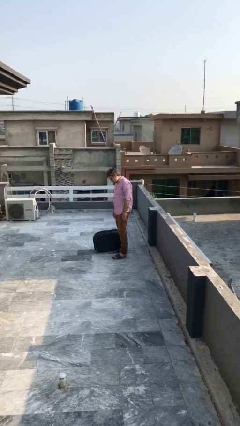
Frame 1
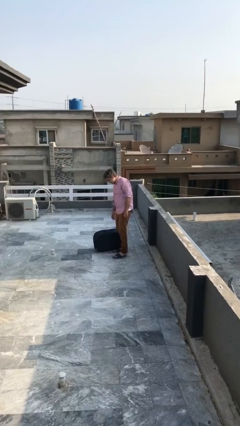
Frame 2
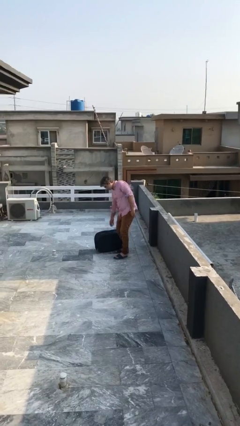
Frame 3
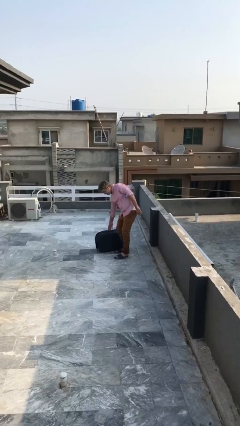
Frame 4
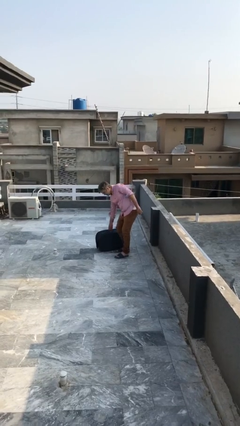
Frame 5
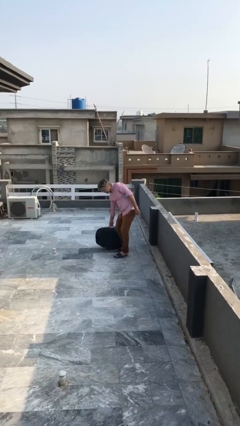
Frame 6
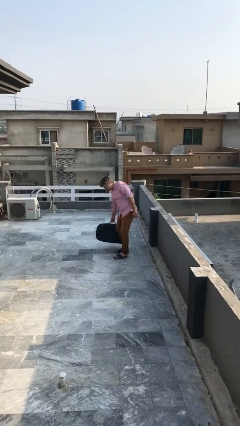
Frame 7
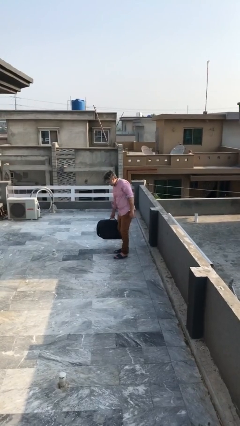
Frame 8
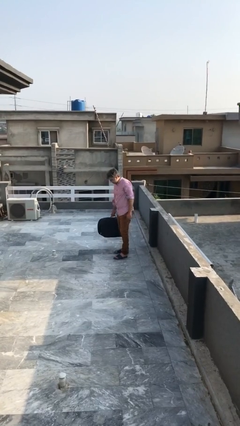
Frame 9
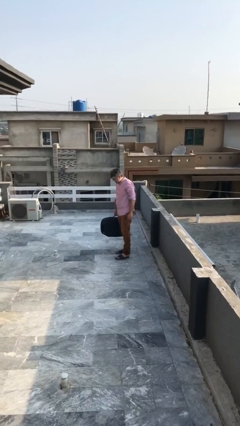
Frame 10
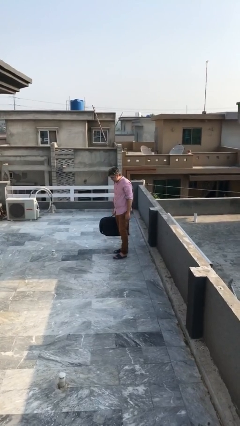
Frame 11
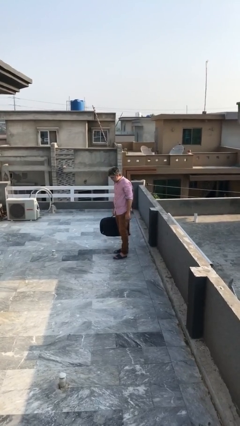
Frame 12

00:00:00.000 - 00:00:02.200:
person picks up object from floor

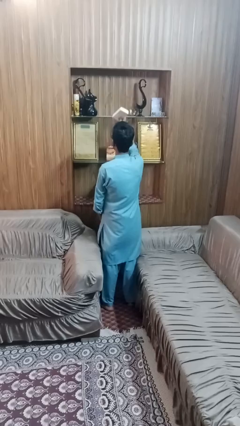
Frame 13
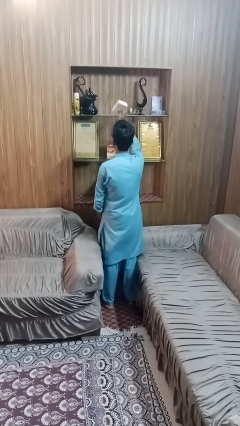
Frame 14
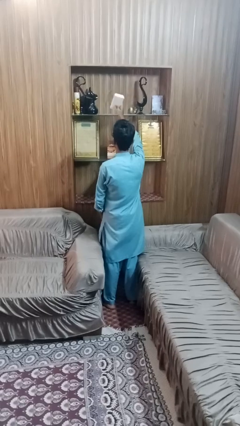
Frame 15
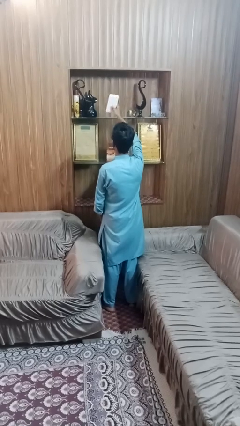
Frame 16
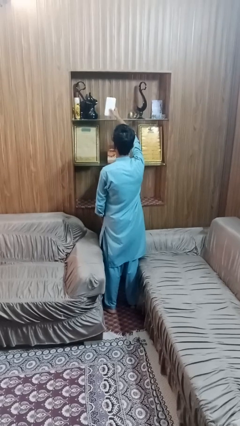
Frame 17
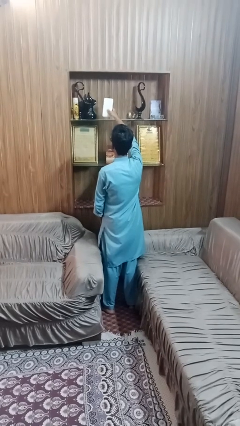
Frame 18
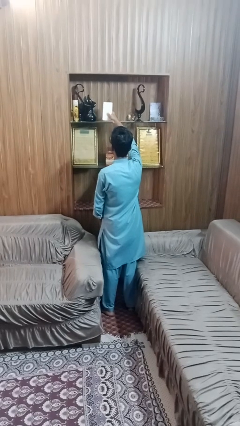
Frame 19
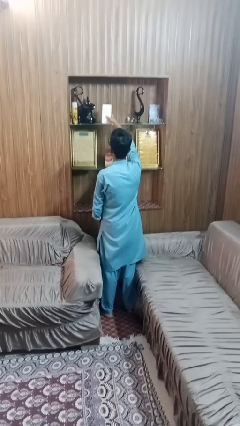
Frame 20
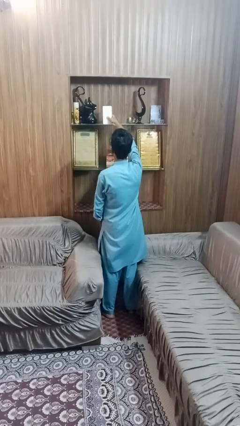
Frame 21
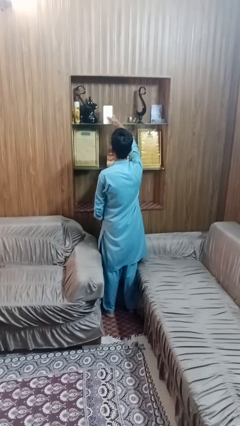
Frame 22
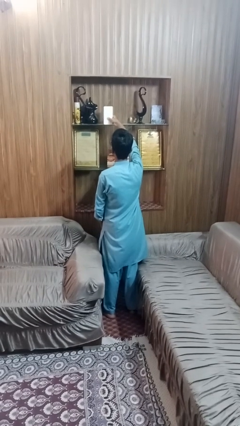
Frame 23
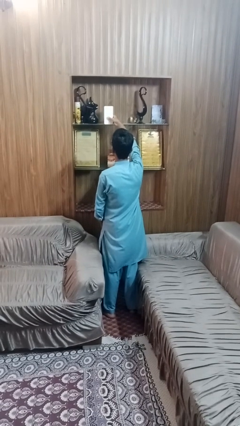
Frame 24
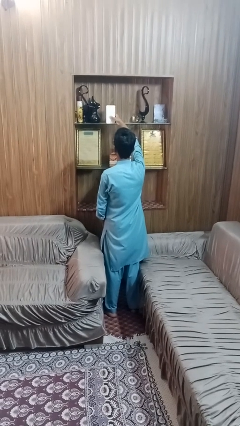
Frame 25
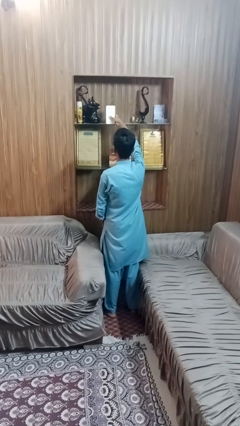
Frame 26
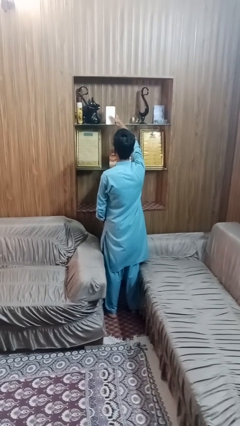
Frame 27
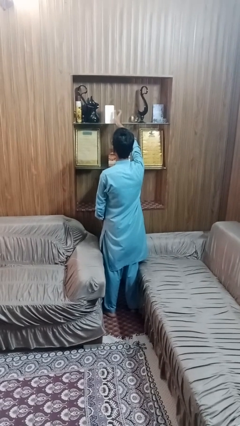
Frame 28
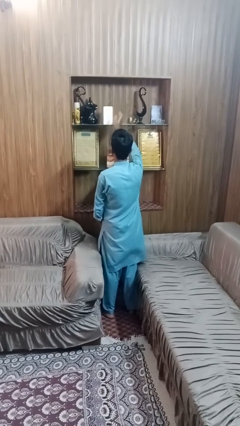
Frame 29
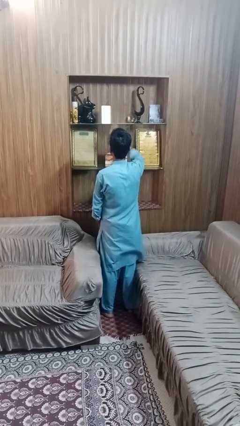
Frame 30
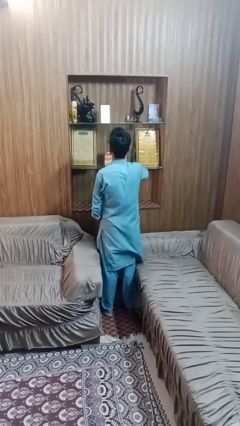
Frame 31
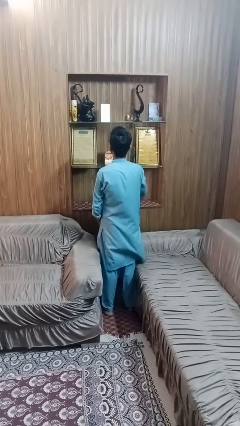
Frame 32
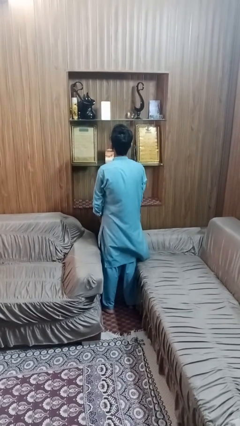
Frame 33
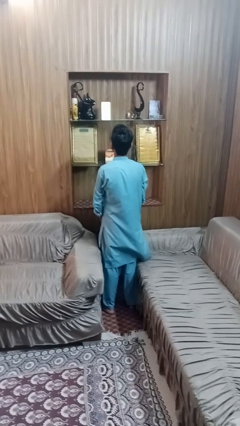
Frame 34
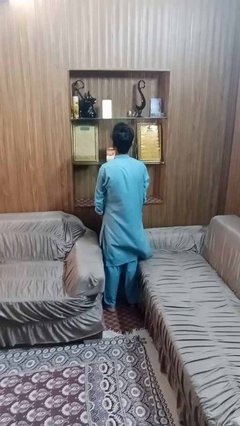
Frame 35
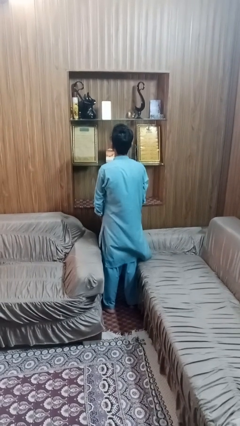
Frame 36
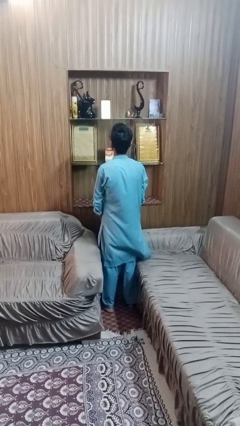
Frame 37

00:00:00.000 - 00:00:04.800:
person puts down object on shelf

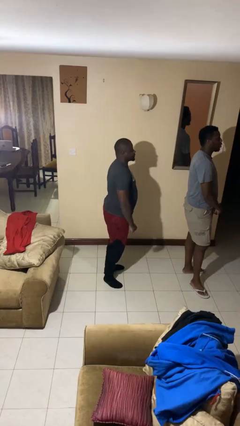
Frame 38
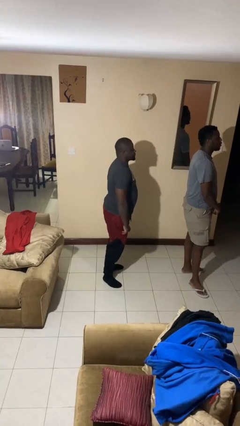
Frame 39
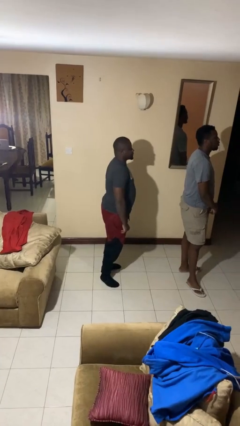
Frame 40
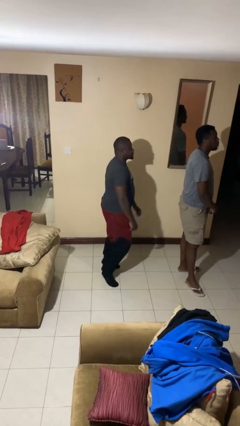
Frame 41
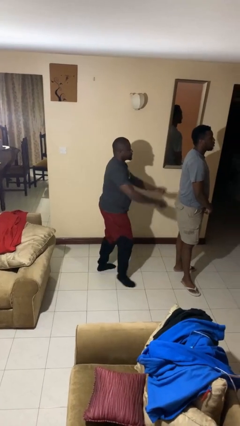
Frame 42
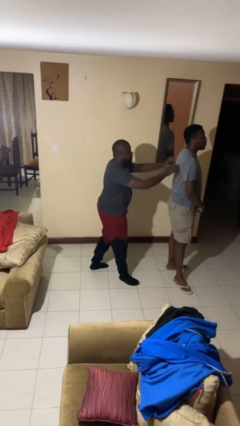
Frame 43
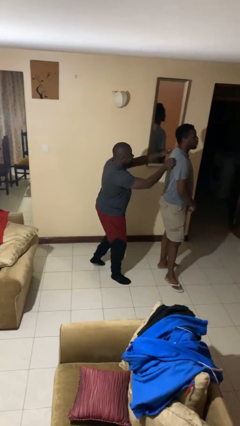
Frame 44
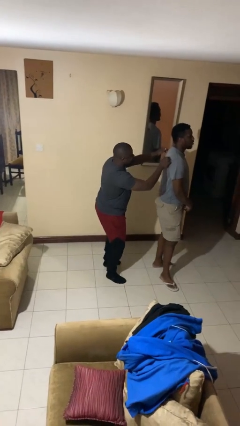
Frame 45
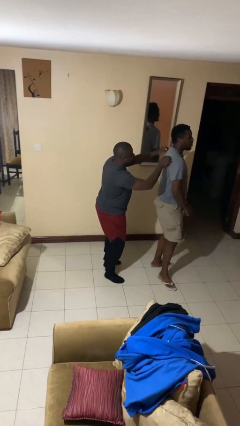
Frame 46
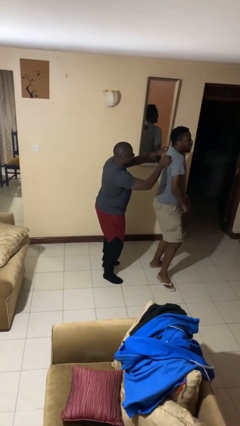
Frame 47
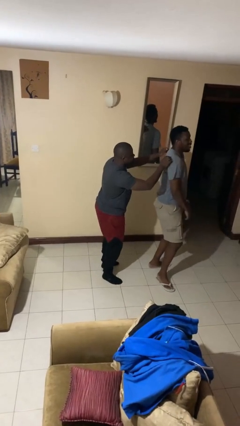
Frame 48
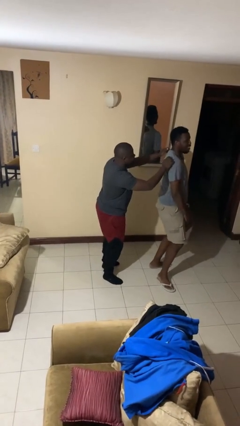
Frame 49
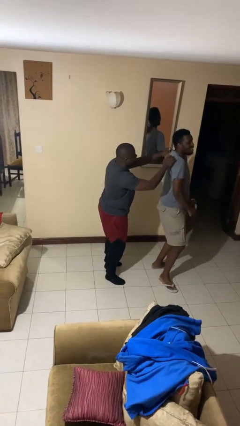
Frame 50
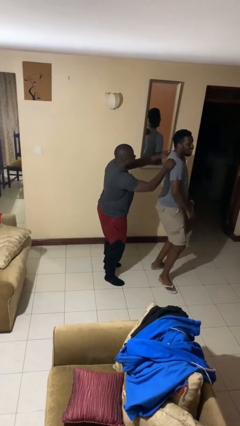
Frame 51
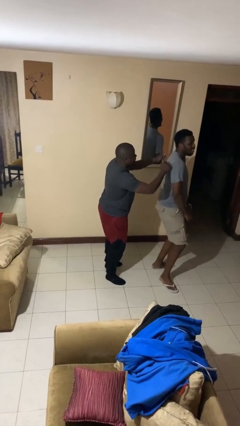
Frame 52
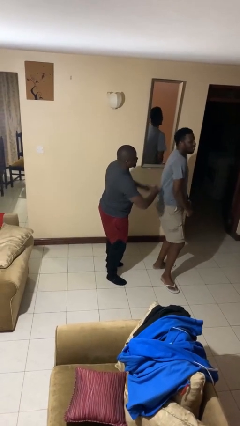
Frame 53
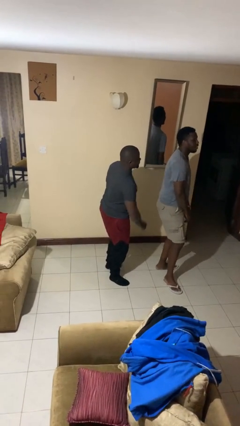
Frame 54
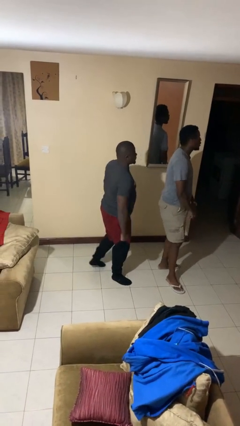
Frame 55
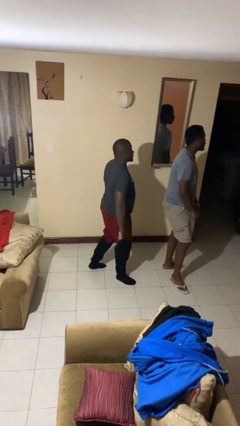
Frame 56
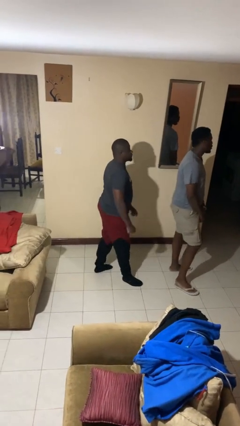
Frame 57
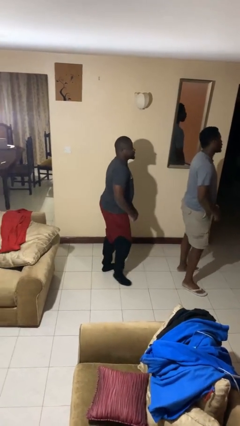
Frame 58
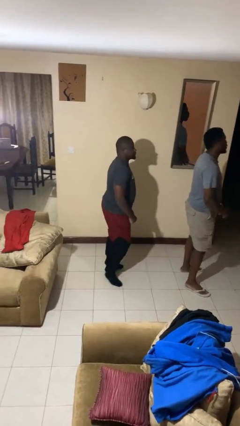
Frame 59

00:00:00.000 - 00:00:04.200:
person tickles person

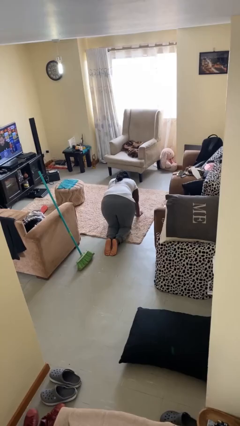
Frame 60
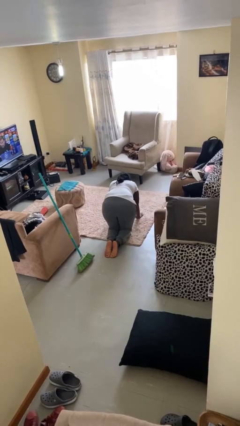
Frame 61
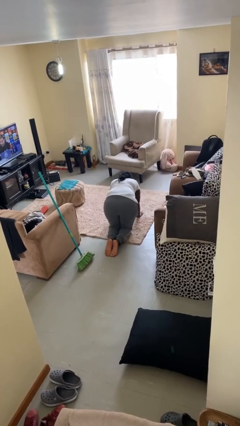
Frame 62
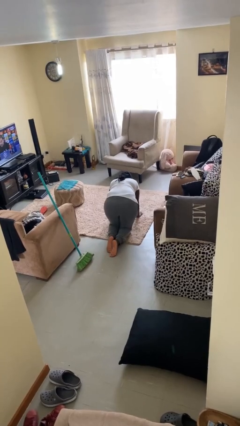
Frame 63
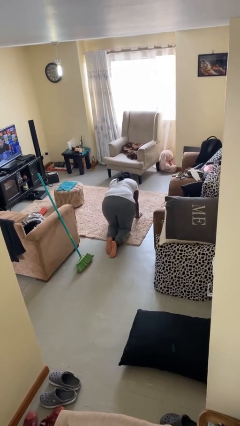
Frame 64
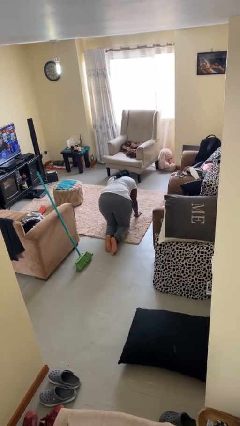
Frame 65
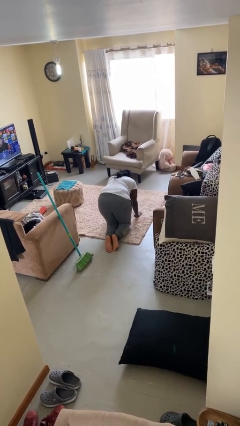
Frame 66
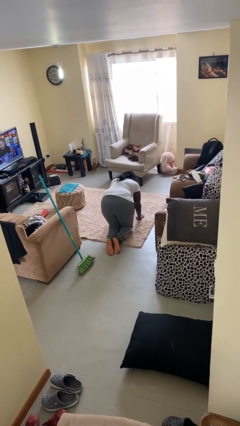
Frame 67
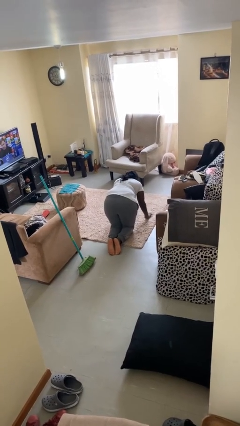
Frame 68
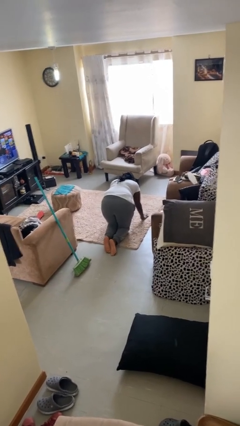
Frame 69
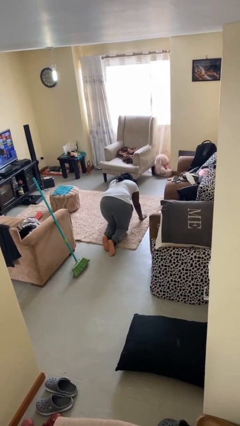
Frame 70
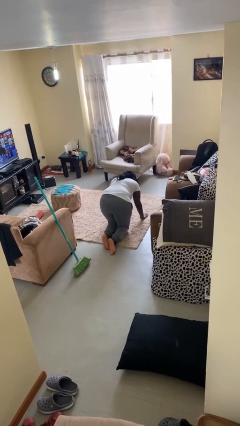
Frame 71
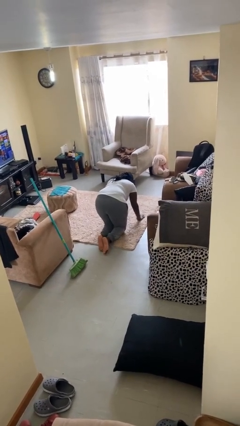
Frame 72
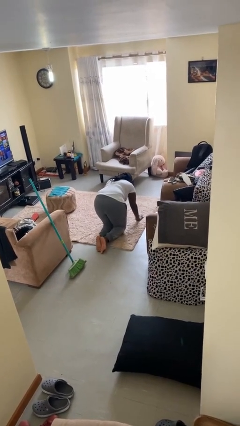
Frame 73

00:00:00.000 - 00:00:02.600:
person crawls

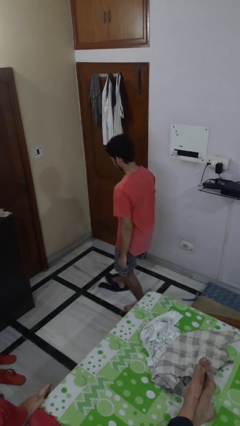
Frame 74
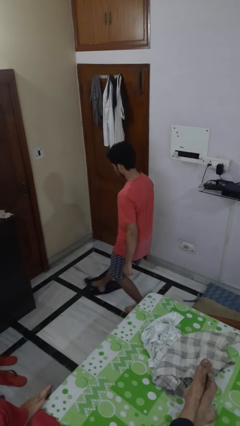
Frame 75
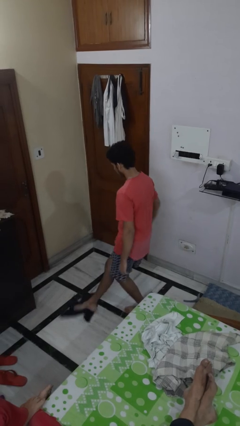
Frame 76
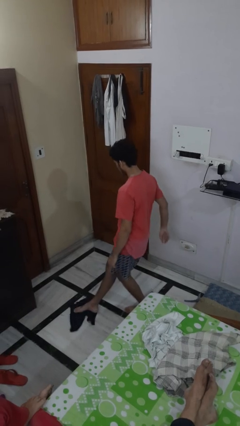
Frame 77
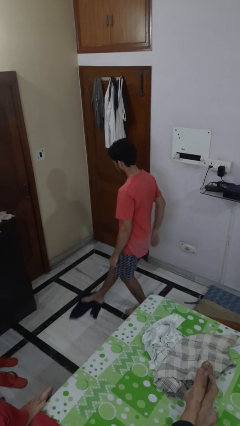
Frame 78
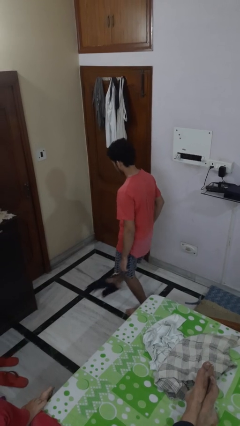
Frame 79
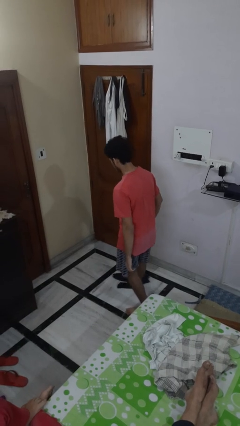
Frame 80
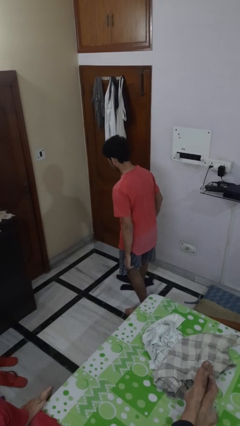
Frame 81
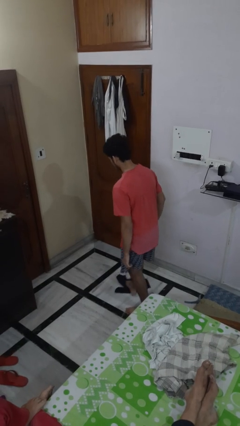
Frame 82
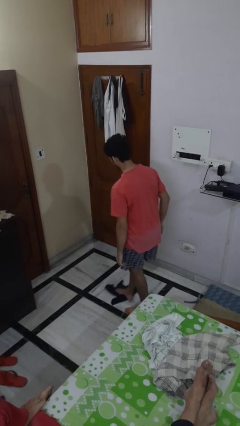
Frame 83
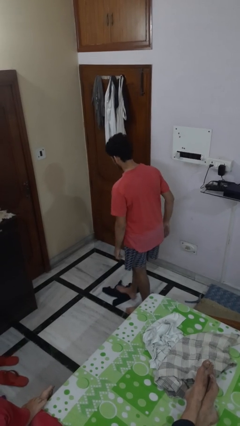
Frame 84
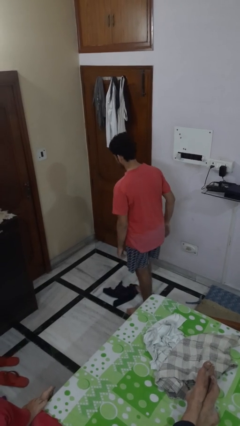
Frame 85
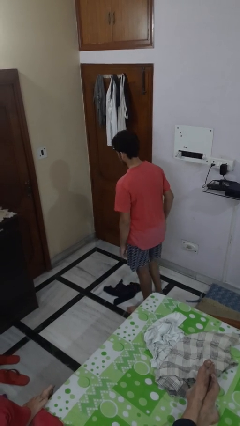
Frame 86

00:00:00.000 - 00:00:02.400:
person mops

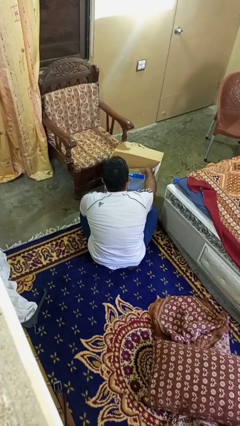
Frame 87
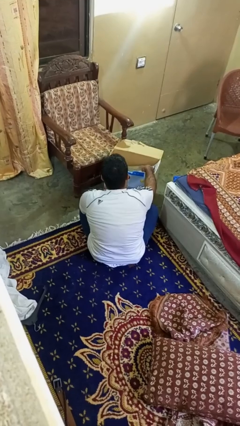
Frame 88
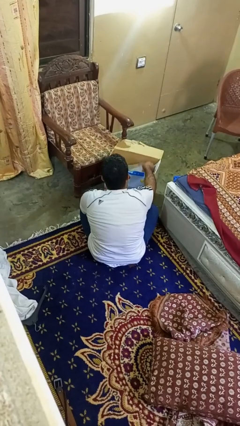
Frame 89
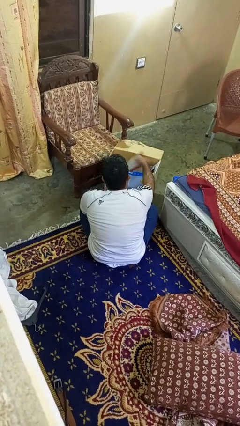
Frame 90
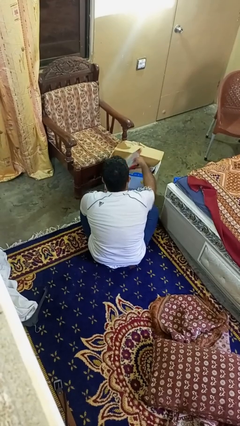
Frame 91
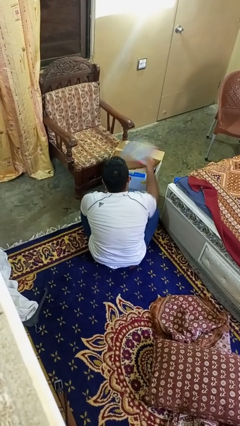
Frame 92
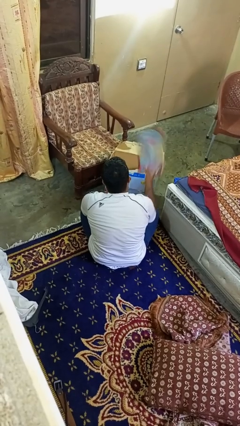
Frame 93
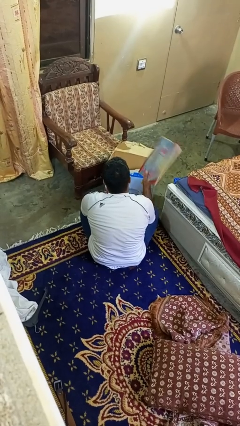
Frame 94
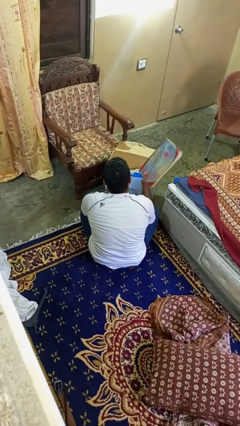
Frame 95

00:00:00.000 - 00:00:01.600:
person takes object from box
